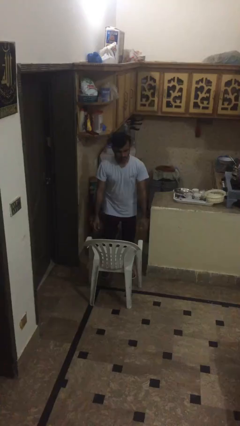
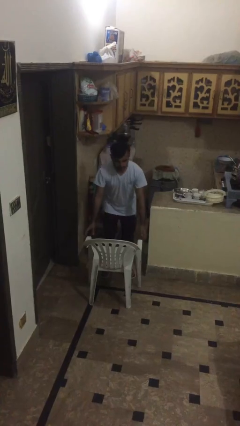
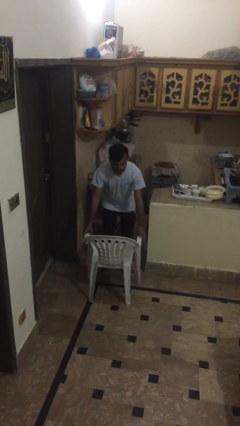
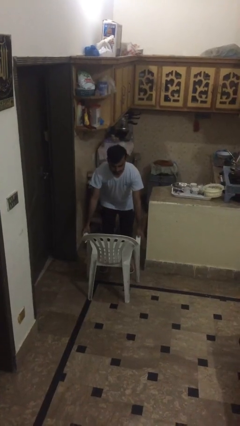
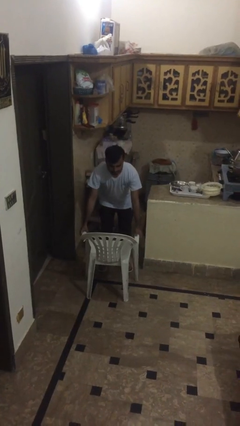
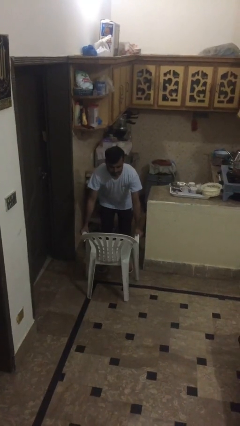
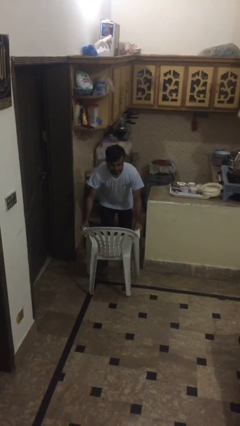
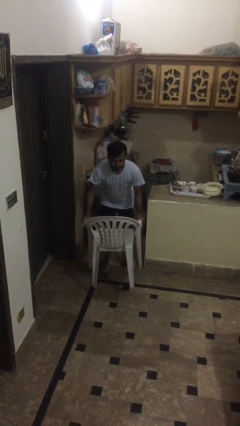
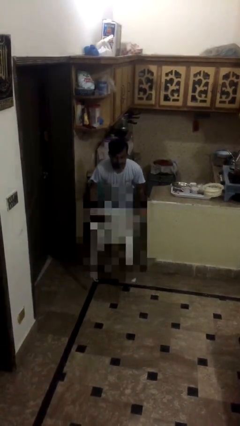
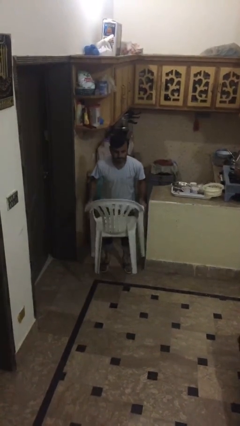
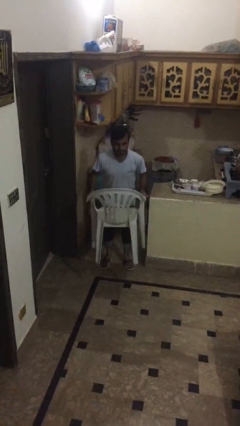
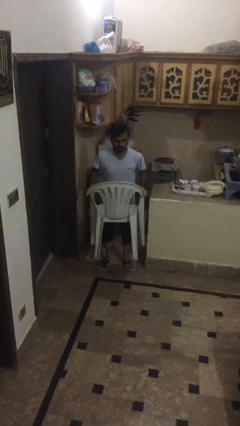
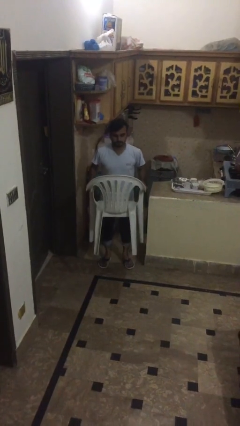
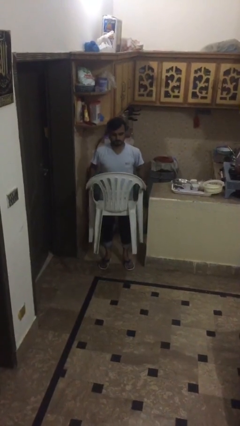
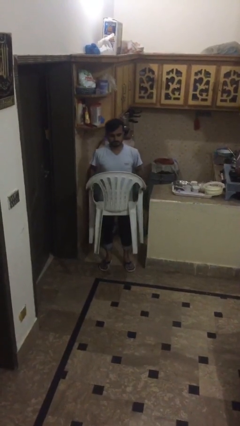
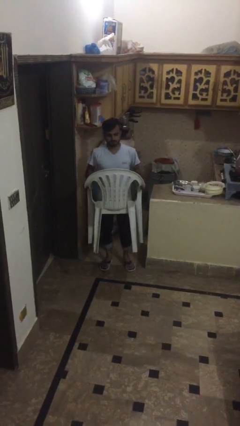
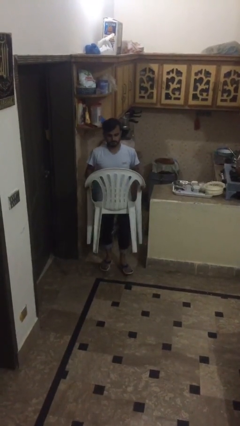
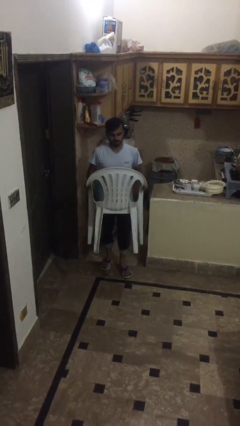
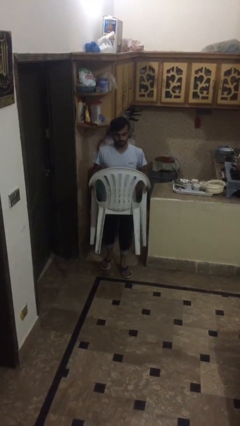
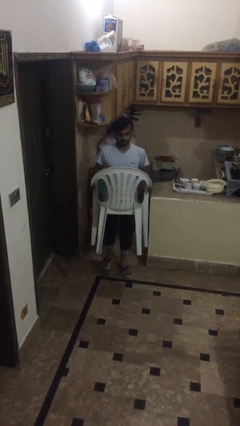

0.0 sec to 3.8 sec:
person picks up object from floor

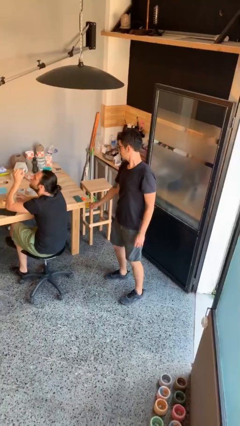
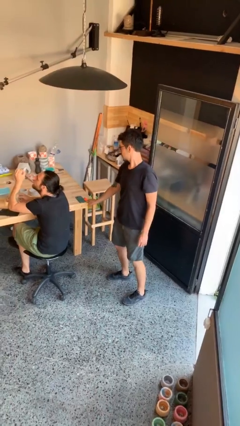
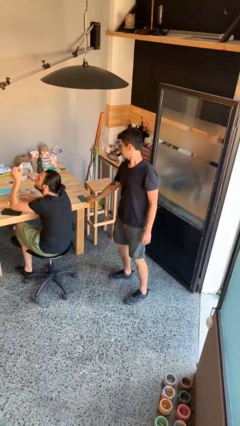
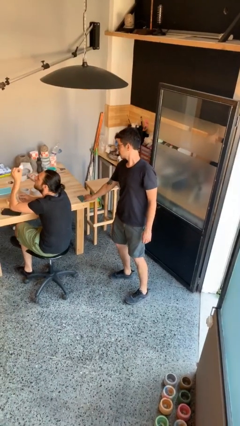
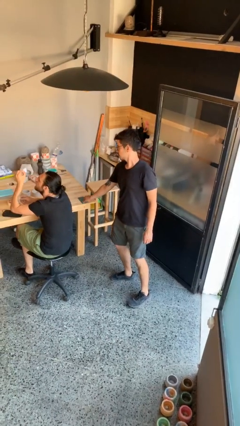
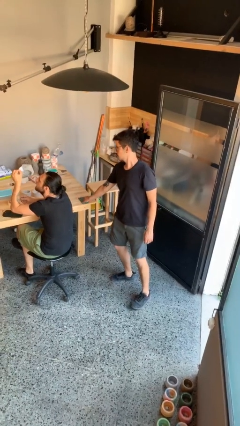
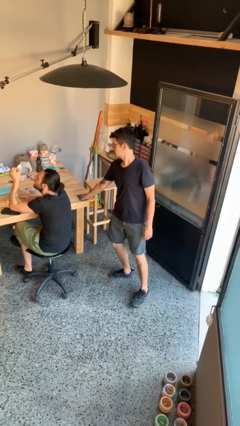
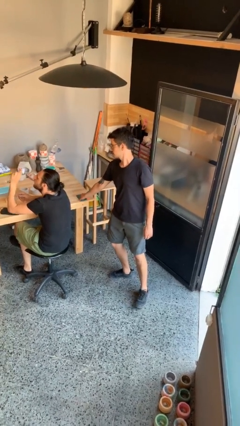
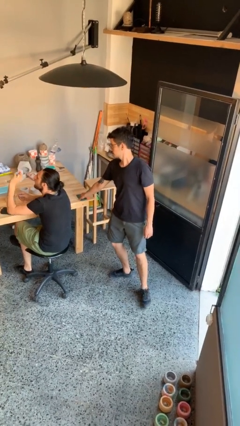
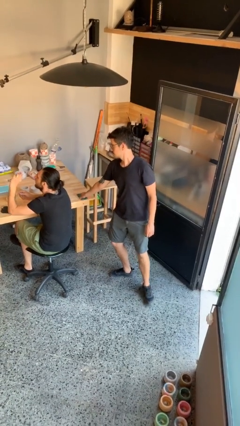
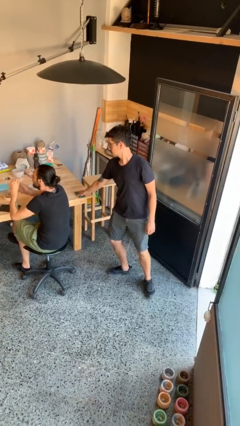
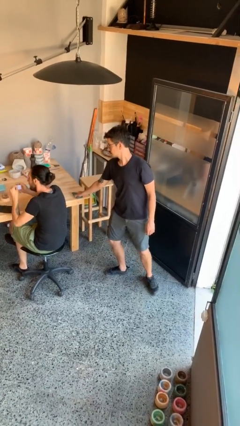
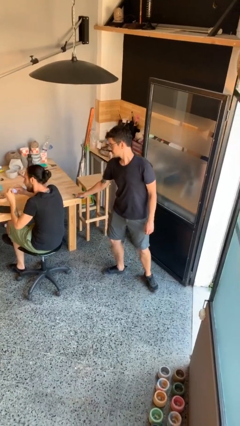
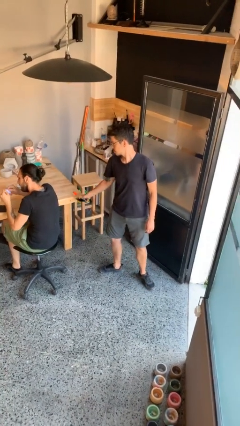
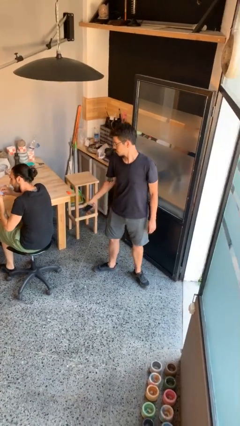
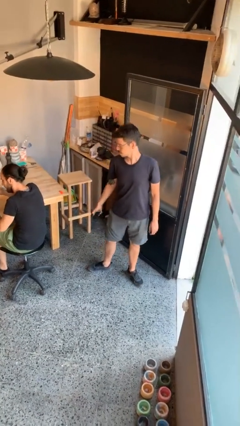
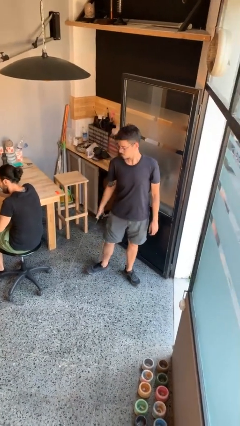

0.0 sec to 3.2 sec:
person steals object from person

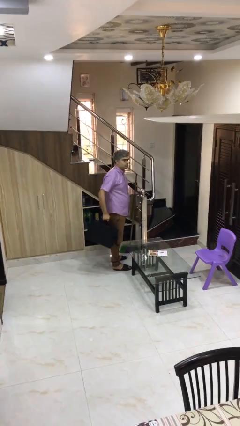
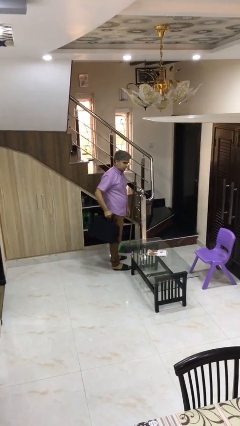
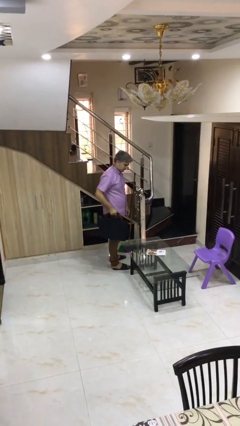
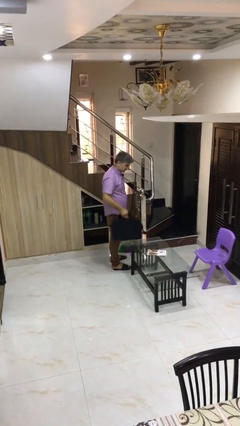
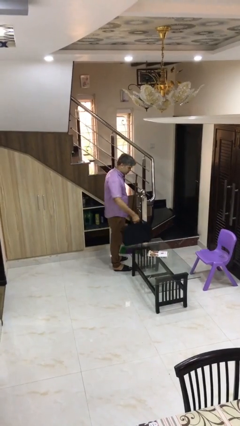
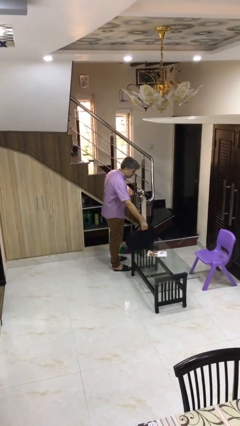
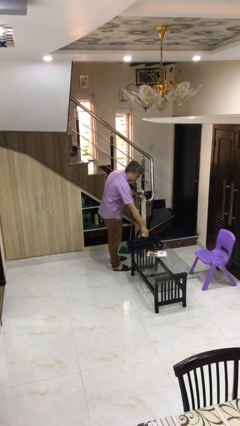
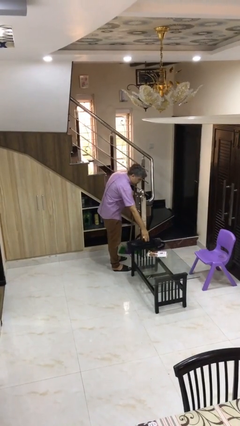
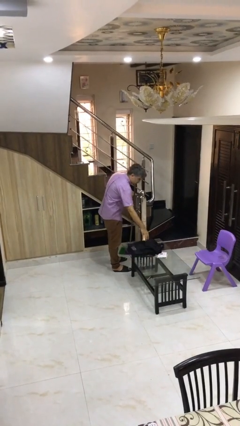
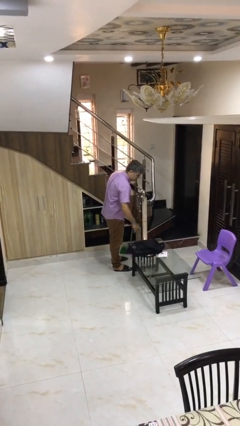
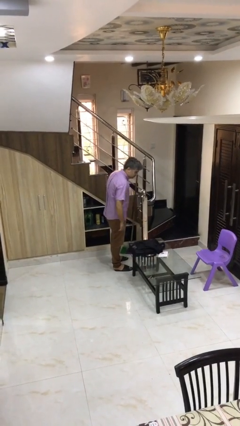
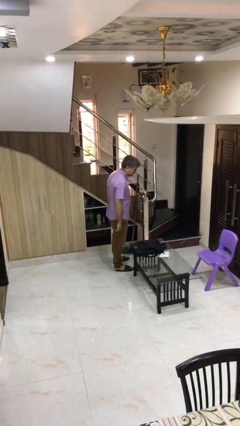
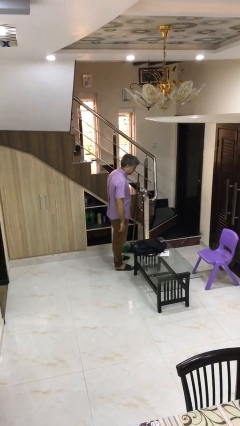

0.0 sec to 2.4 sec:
person puts down object on table

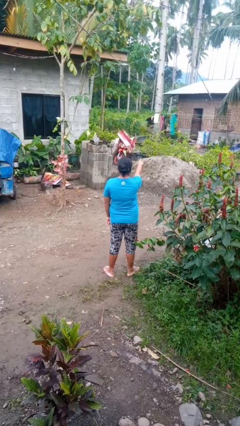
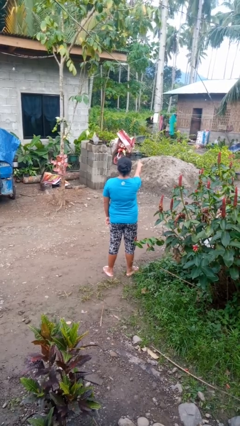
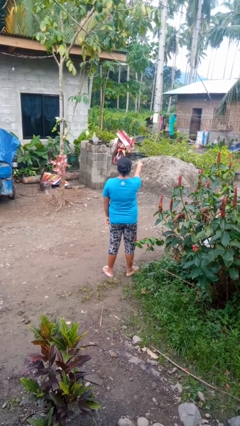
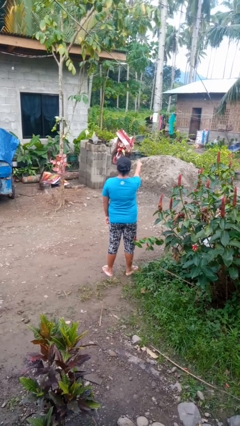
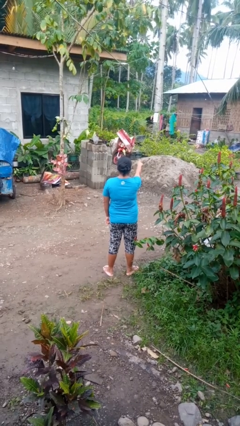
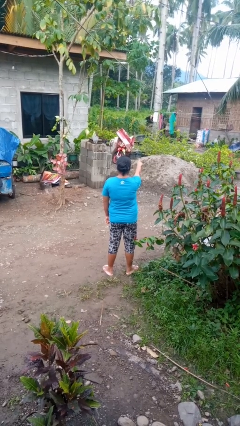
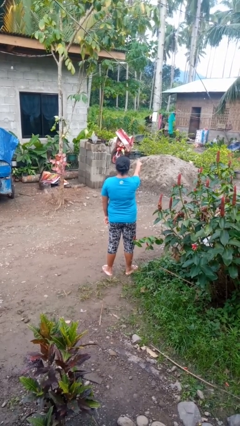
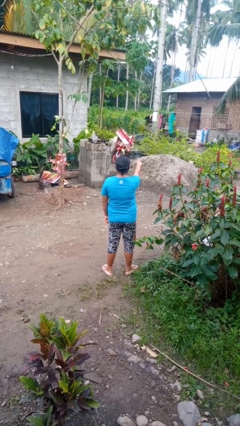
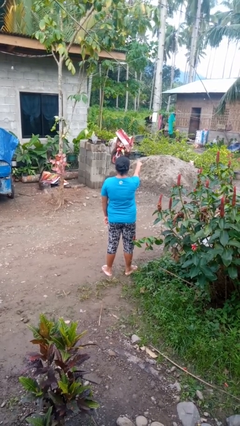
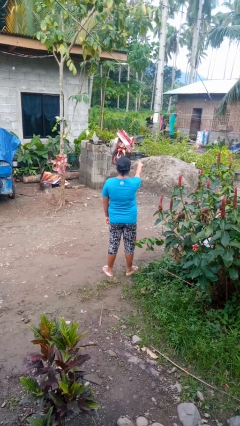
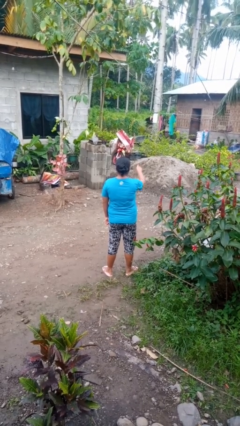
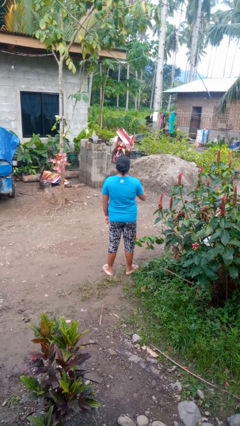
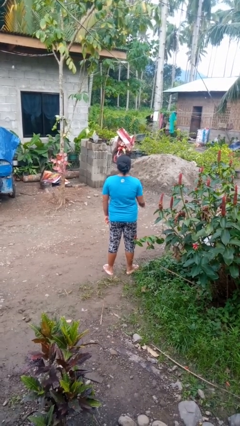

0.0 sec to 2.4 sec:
person points at person

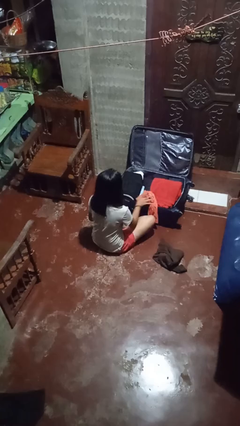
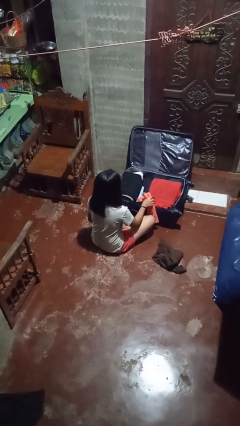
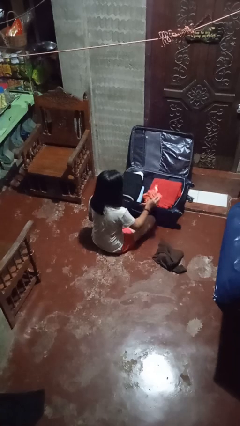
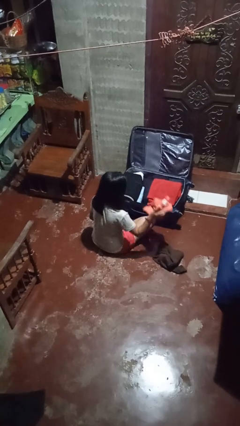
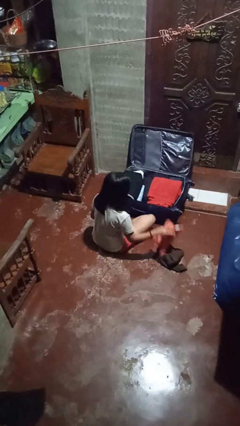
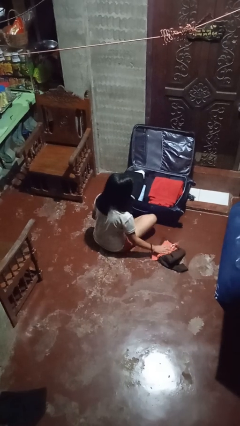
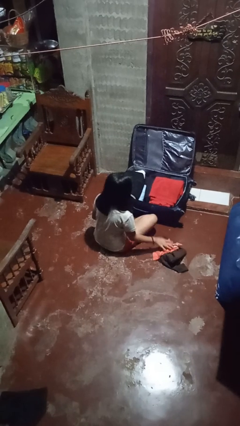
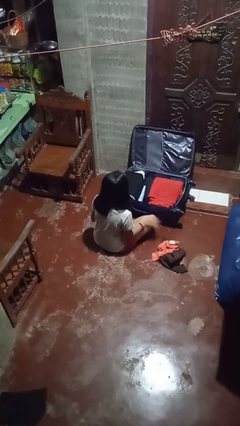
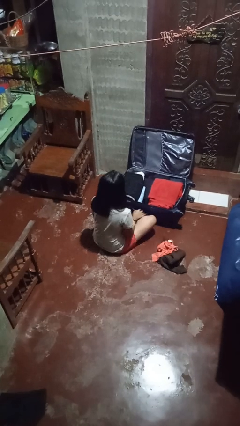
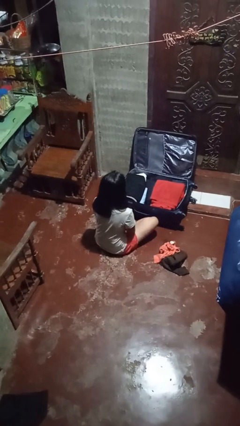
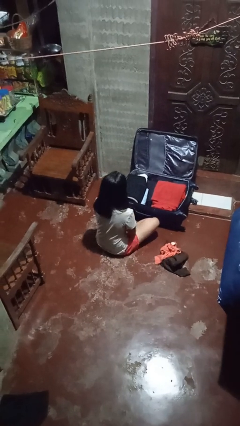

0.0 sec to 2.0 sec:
person unloads clothes from suitcase

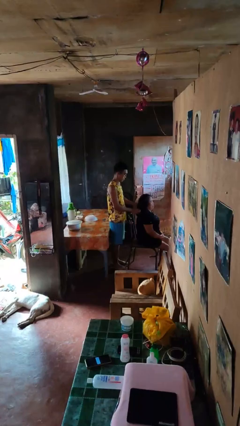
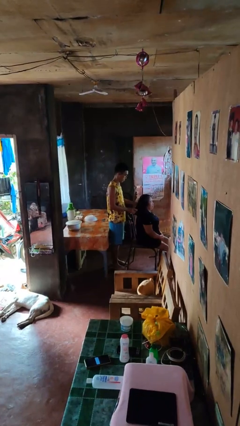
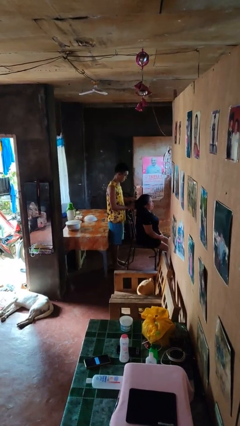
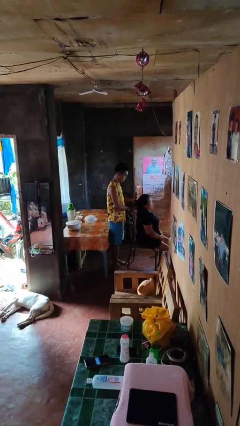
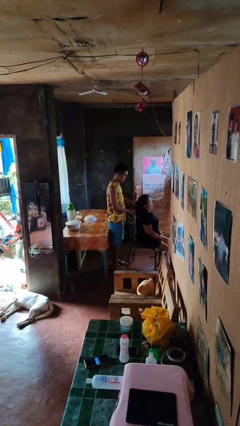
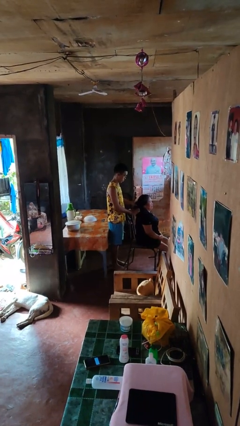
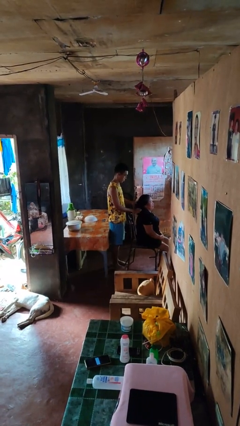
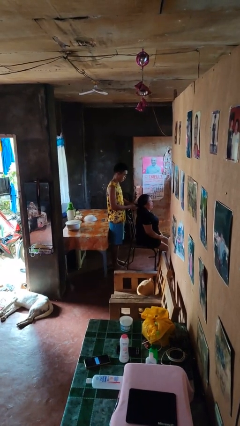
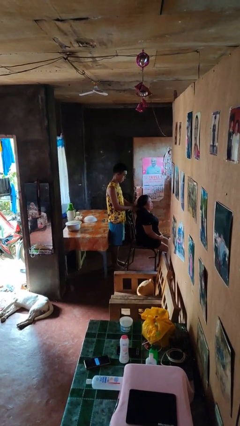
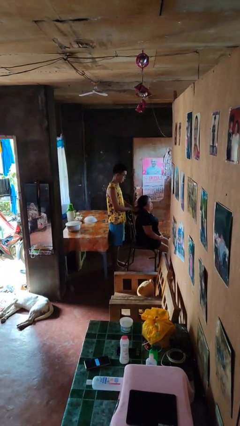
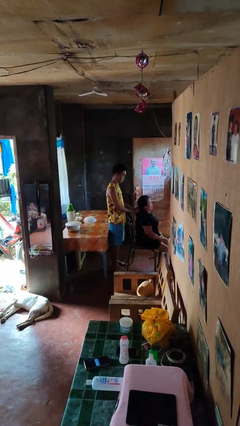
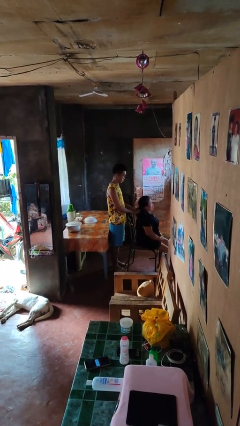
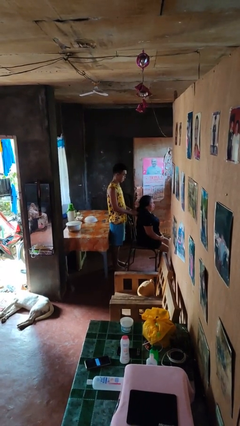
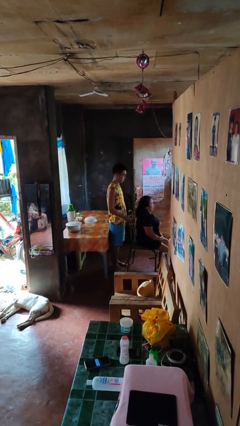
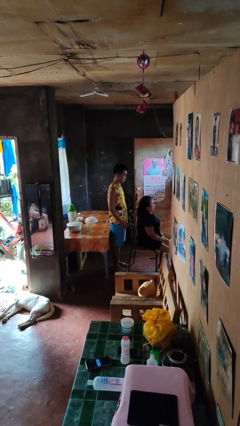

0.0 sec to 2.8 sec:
person braids hair of person
